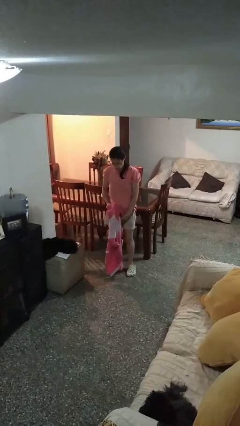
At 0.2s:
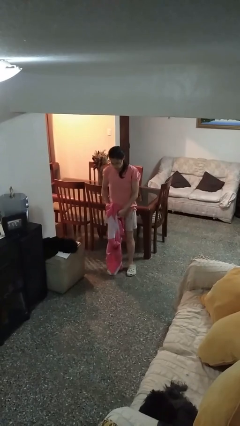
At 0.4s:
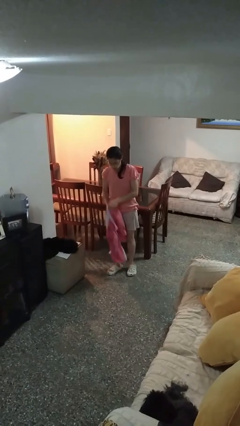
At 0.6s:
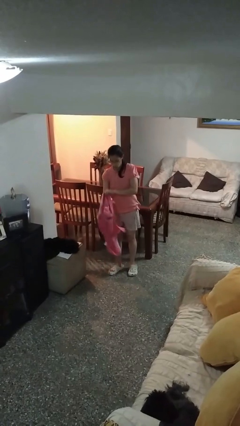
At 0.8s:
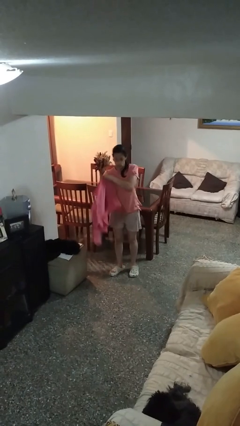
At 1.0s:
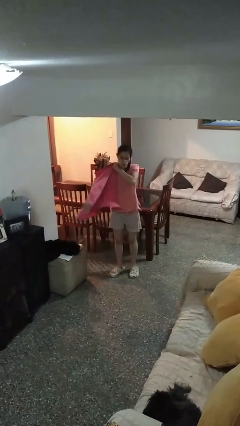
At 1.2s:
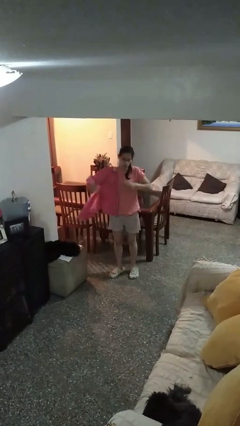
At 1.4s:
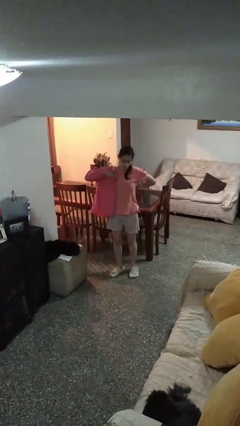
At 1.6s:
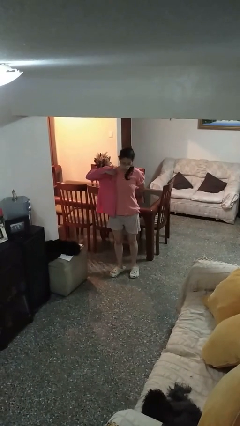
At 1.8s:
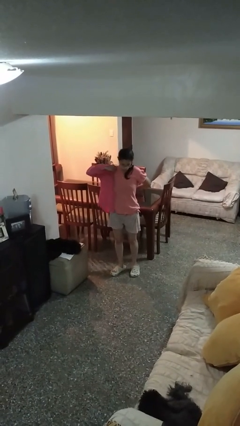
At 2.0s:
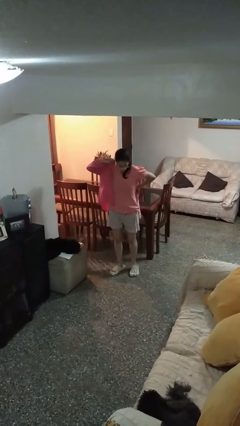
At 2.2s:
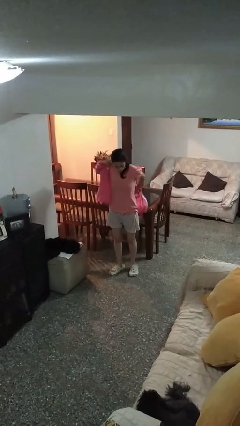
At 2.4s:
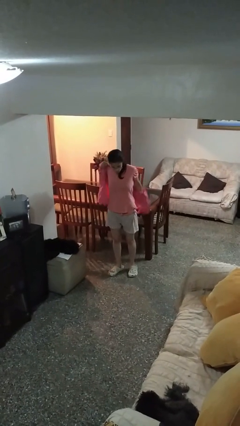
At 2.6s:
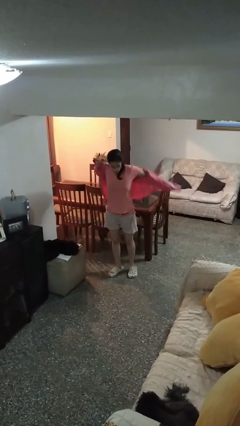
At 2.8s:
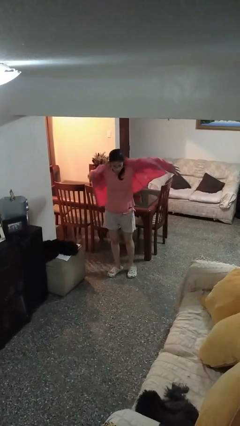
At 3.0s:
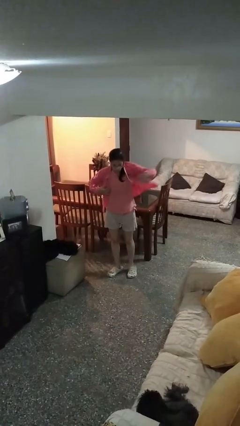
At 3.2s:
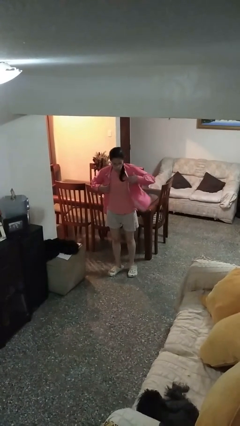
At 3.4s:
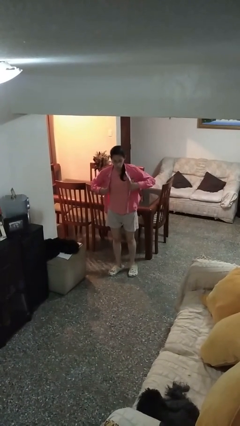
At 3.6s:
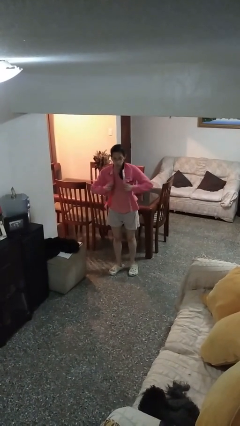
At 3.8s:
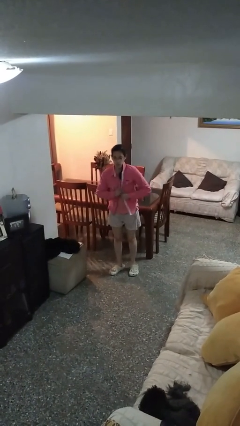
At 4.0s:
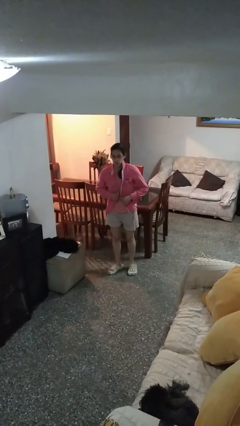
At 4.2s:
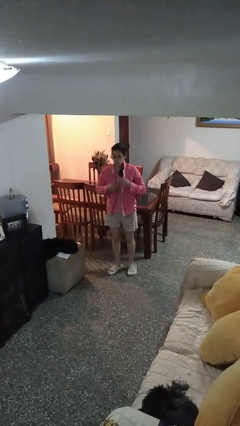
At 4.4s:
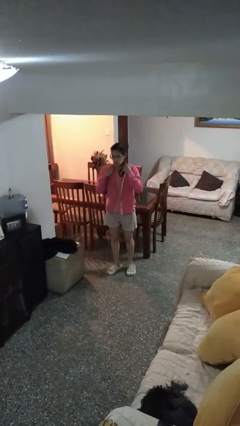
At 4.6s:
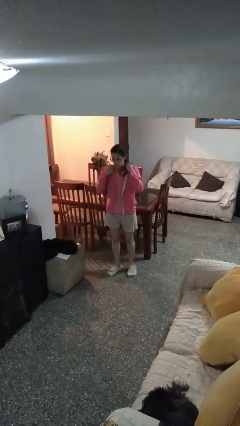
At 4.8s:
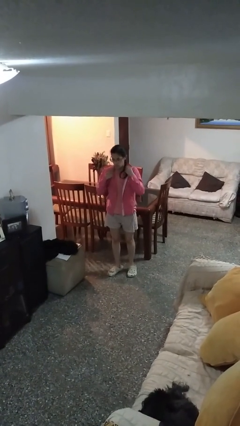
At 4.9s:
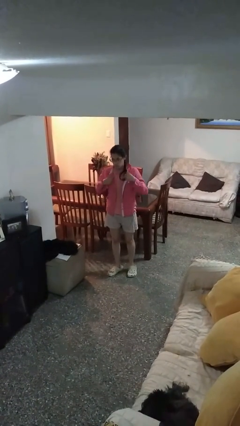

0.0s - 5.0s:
person puts on shirt

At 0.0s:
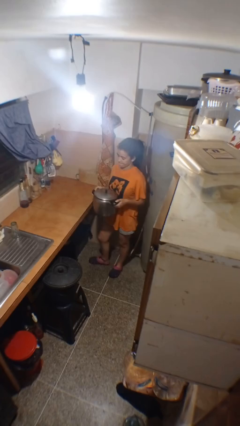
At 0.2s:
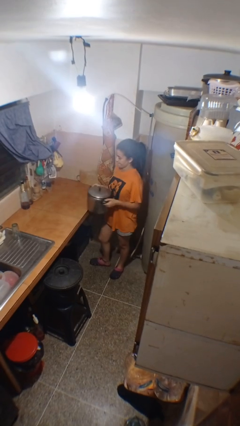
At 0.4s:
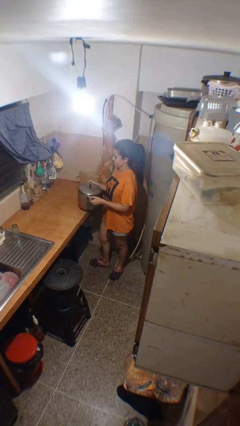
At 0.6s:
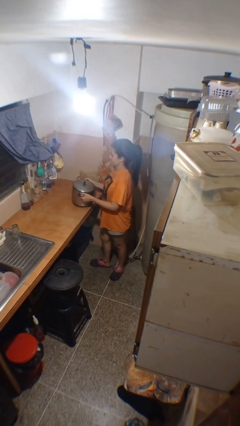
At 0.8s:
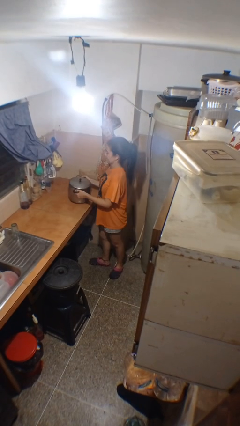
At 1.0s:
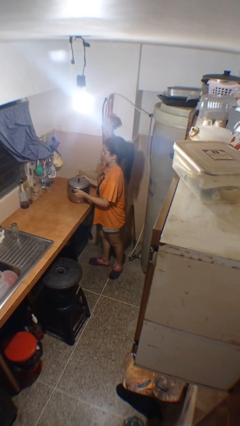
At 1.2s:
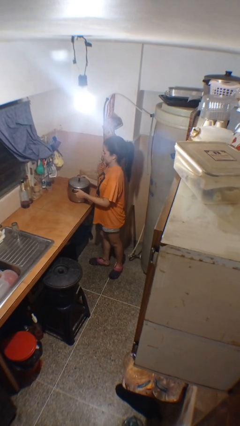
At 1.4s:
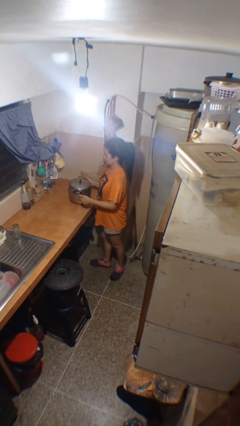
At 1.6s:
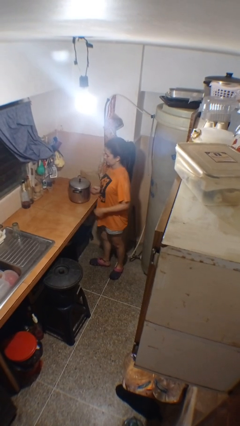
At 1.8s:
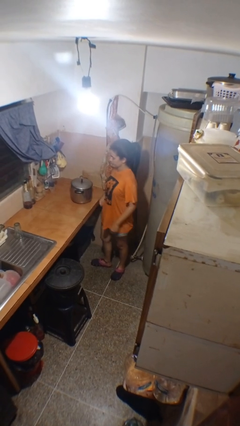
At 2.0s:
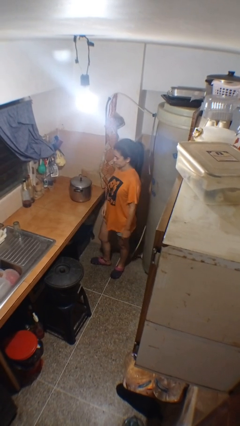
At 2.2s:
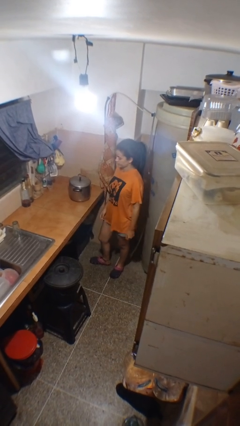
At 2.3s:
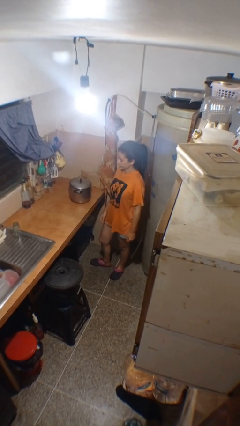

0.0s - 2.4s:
person puts down object on countertop

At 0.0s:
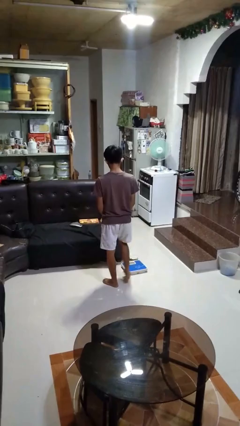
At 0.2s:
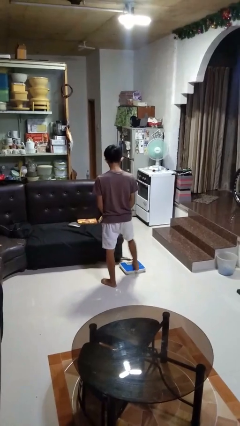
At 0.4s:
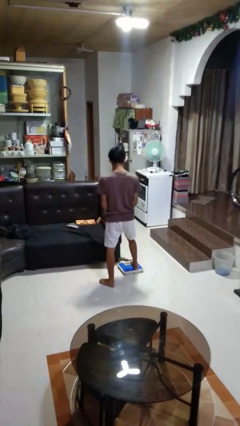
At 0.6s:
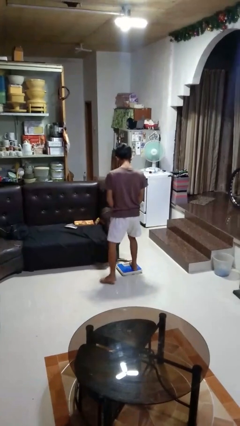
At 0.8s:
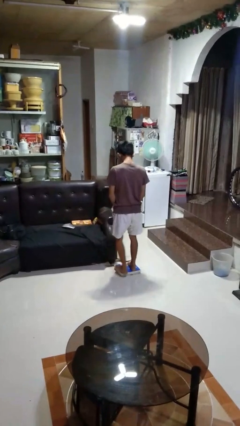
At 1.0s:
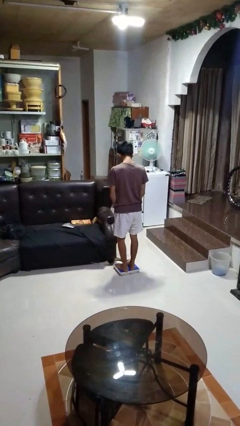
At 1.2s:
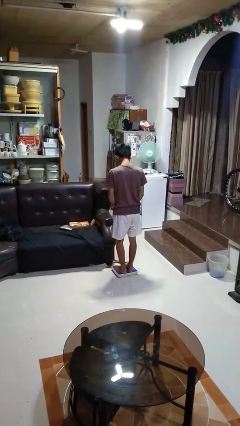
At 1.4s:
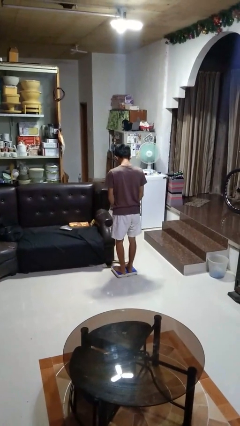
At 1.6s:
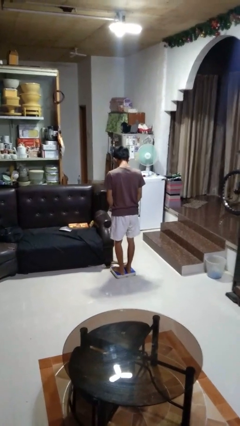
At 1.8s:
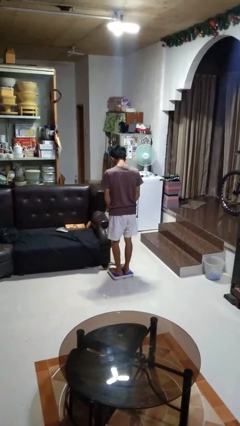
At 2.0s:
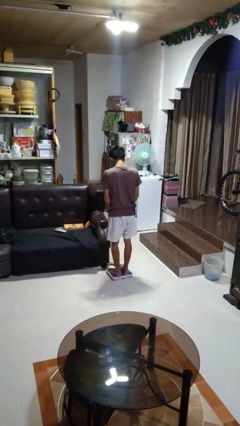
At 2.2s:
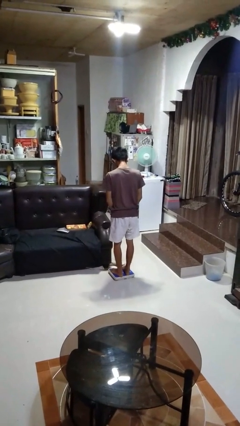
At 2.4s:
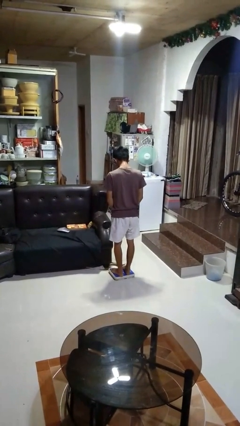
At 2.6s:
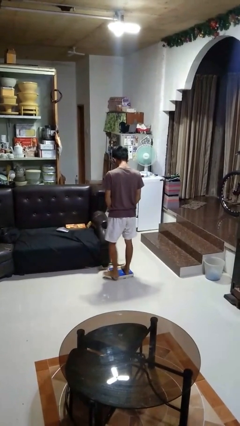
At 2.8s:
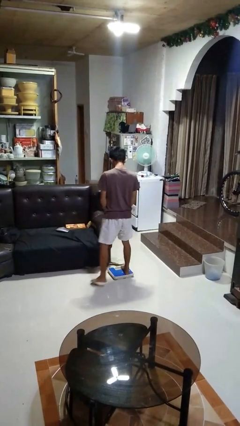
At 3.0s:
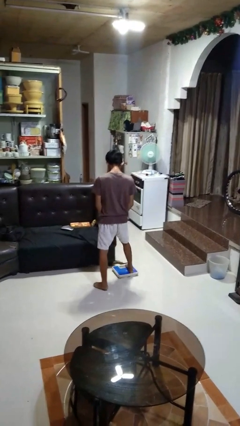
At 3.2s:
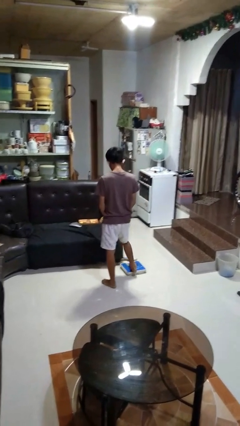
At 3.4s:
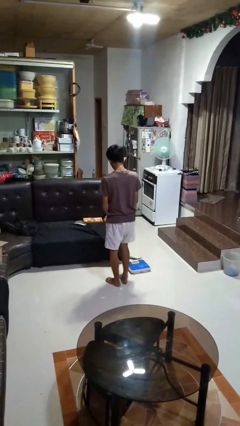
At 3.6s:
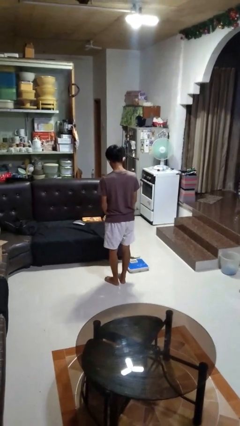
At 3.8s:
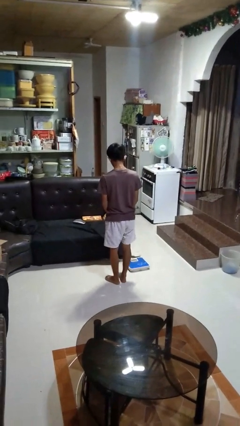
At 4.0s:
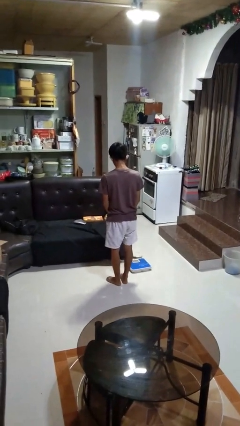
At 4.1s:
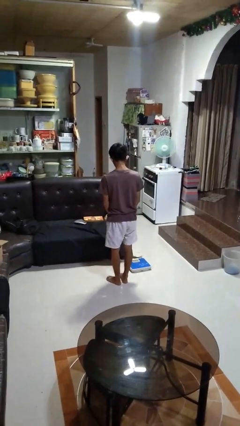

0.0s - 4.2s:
person uses bodyweight scale

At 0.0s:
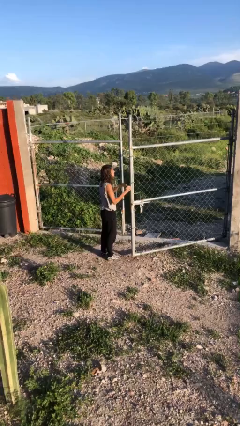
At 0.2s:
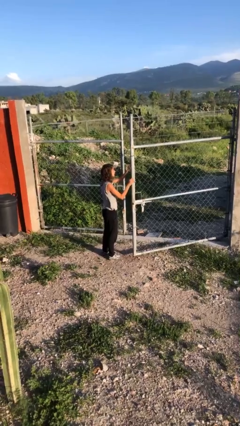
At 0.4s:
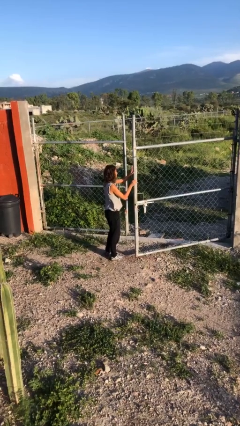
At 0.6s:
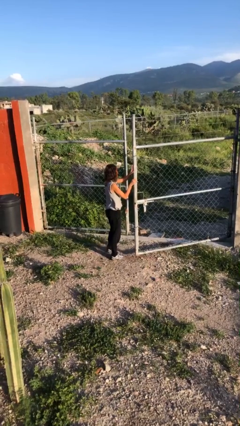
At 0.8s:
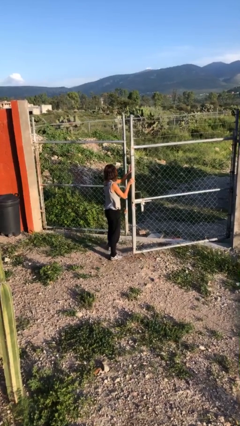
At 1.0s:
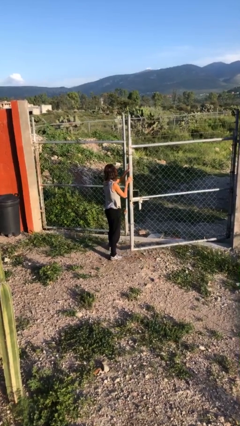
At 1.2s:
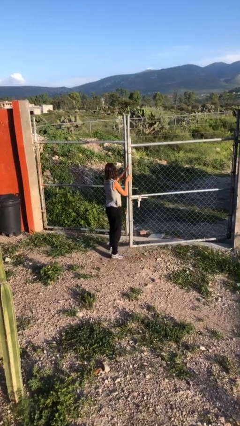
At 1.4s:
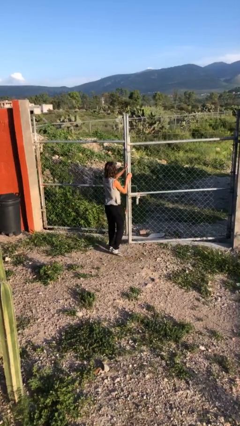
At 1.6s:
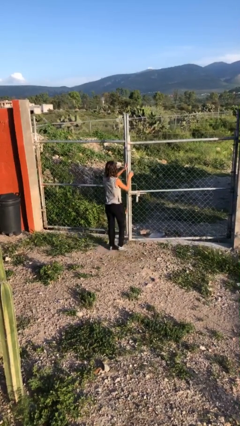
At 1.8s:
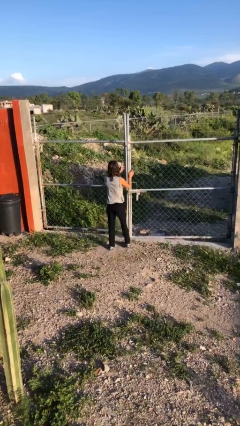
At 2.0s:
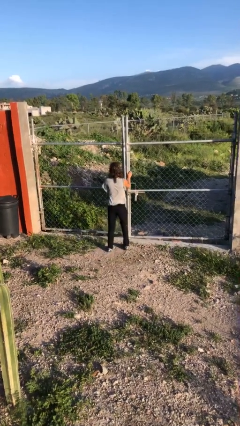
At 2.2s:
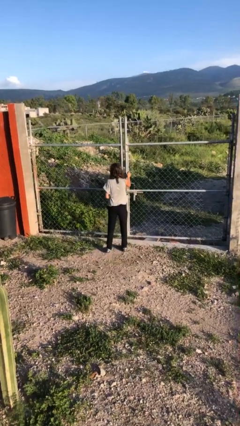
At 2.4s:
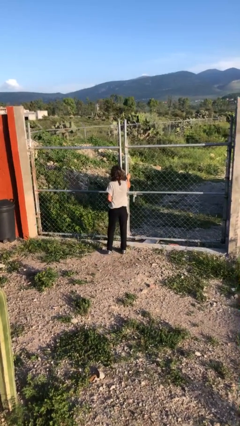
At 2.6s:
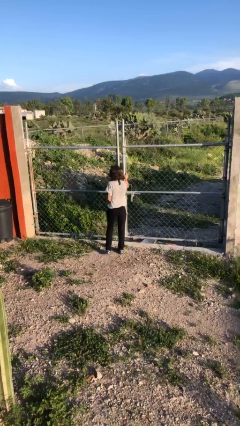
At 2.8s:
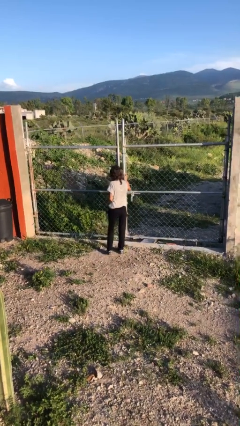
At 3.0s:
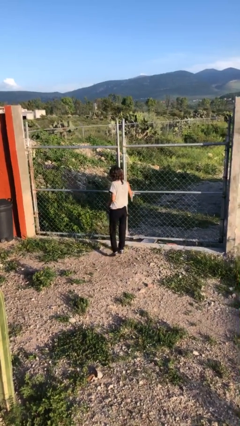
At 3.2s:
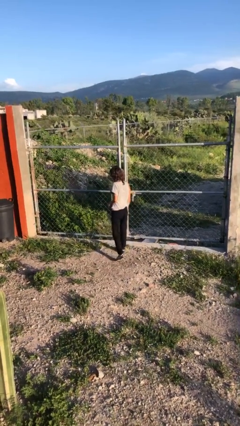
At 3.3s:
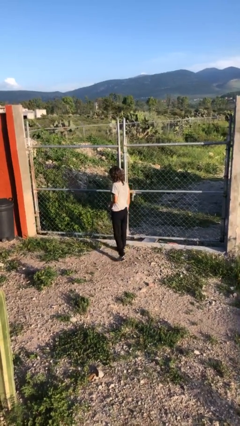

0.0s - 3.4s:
person closes gate

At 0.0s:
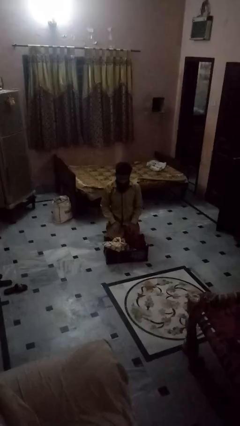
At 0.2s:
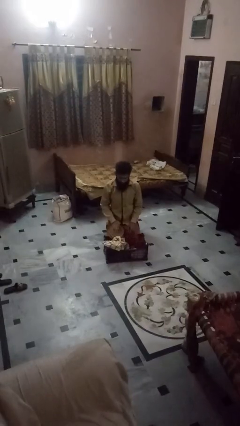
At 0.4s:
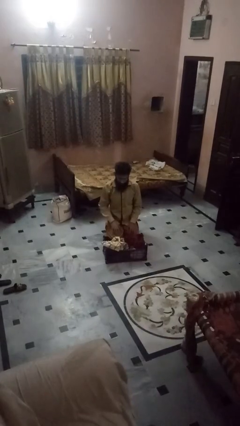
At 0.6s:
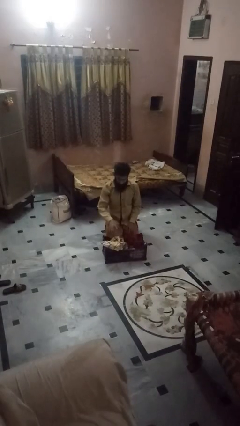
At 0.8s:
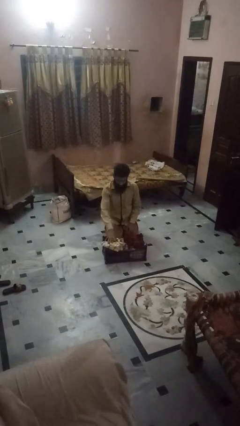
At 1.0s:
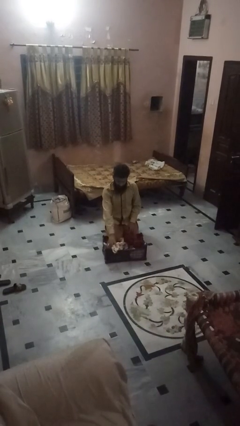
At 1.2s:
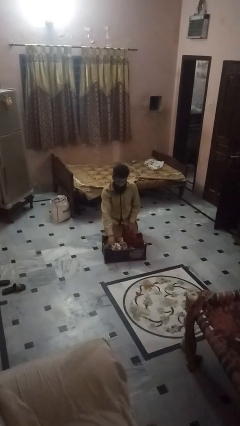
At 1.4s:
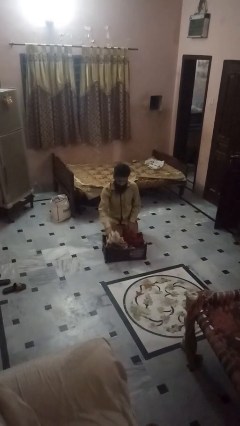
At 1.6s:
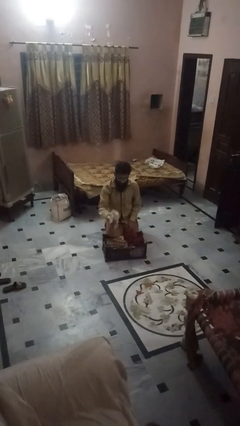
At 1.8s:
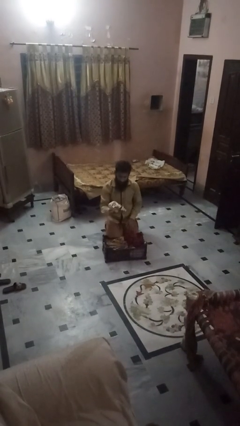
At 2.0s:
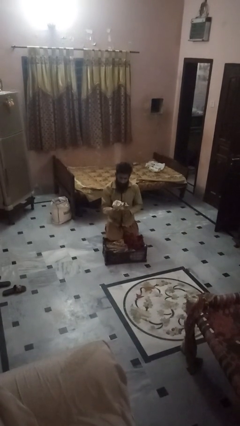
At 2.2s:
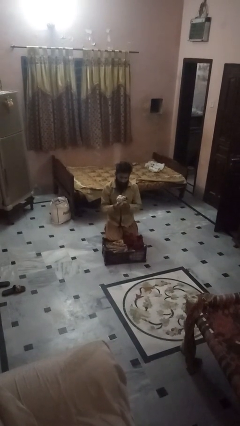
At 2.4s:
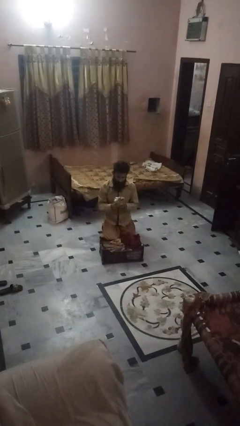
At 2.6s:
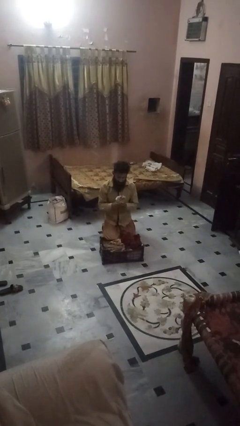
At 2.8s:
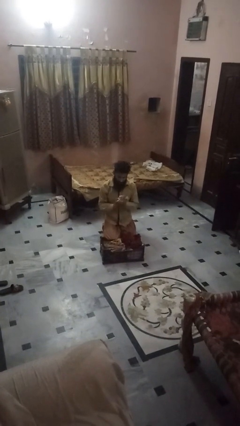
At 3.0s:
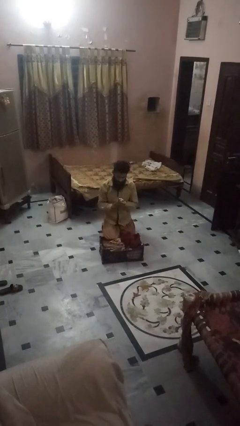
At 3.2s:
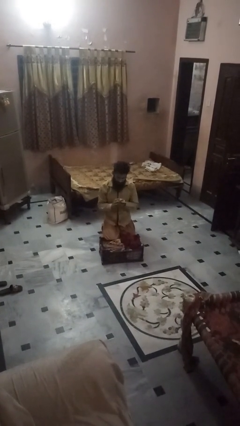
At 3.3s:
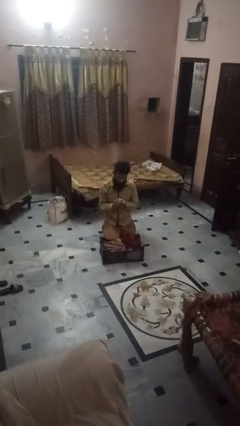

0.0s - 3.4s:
person puts object into basket
